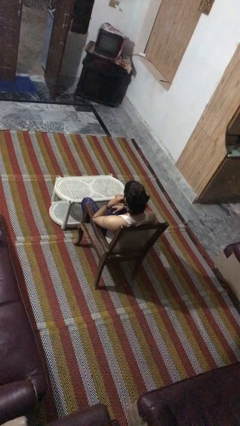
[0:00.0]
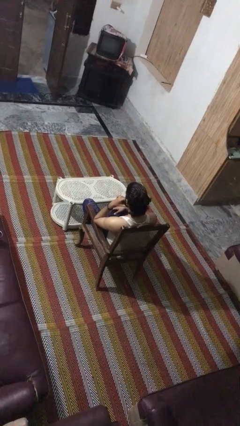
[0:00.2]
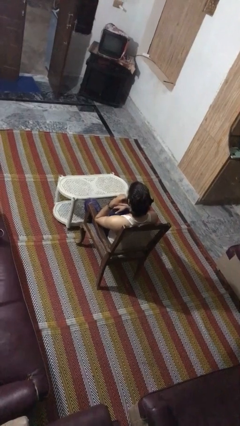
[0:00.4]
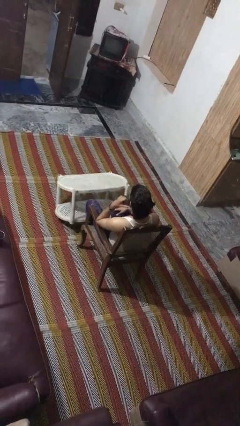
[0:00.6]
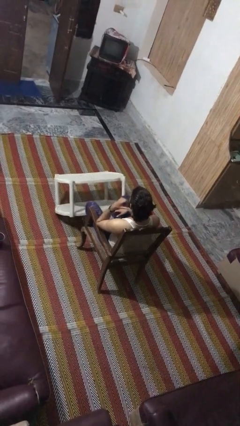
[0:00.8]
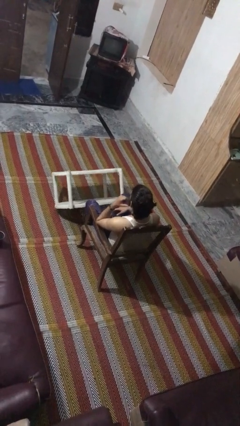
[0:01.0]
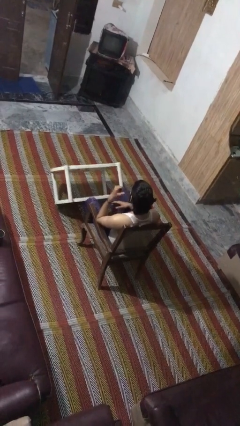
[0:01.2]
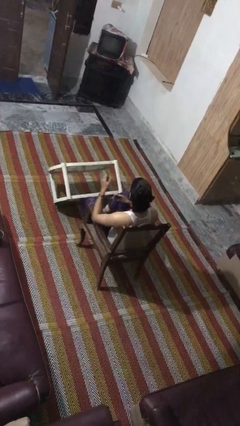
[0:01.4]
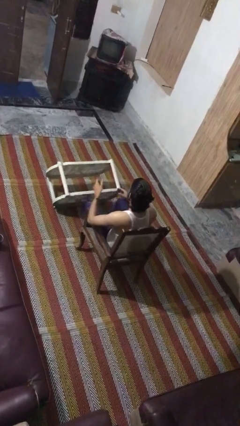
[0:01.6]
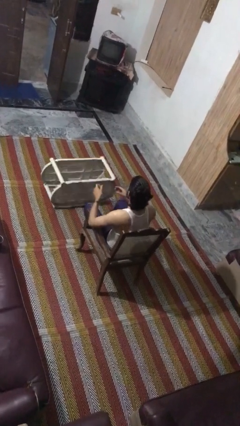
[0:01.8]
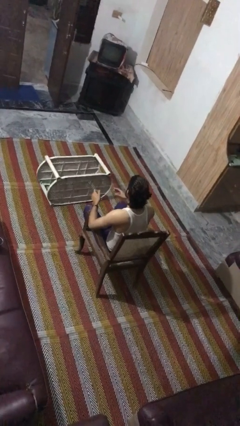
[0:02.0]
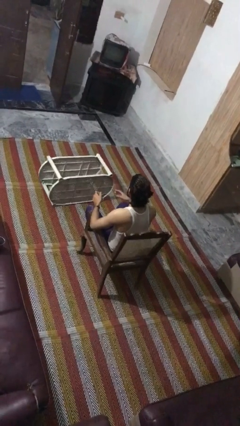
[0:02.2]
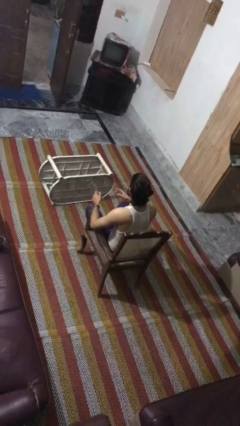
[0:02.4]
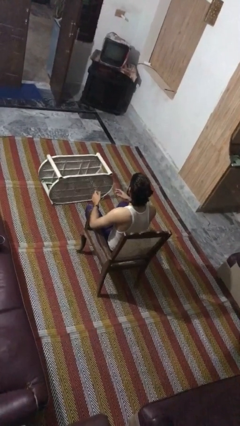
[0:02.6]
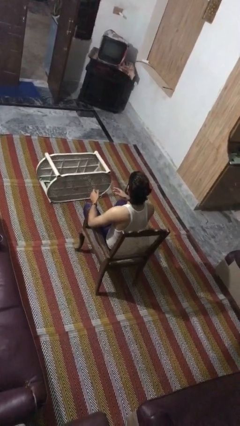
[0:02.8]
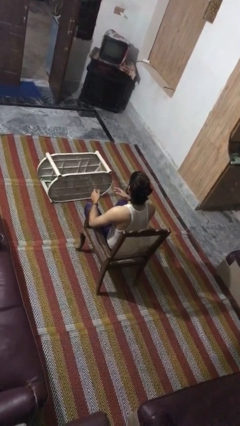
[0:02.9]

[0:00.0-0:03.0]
person knocks over furniture

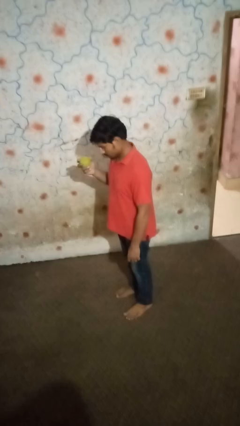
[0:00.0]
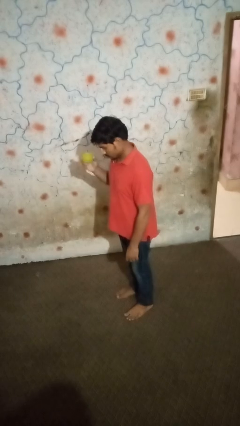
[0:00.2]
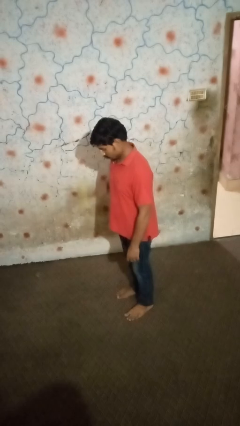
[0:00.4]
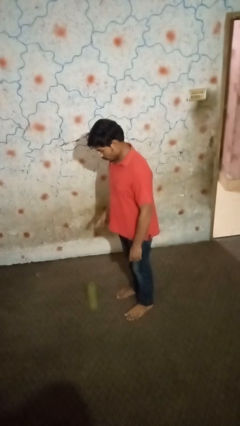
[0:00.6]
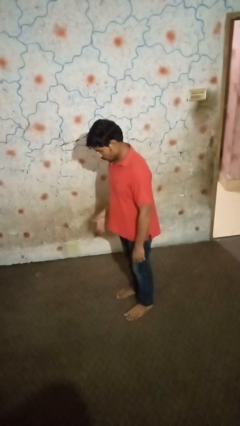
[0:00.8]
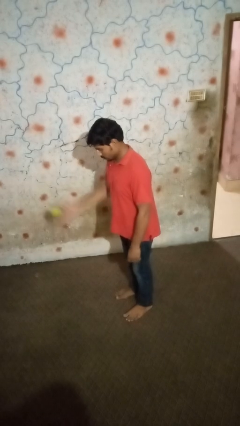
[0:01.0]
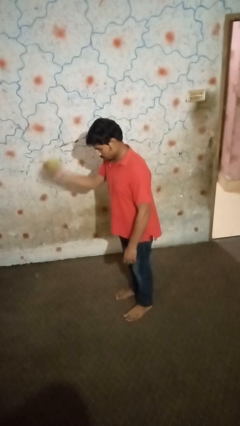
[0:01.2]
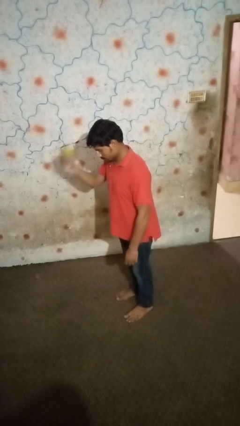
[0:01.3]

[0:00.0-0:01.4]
person bounces ball on floor

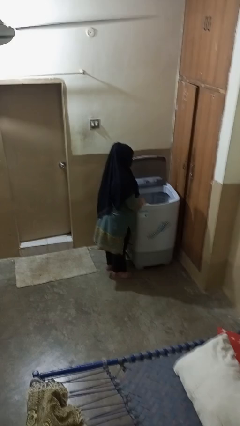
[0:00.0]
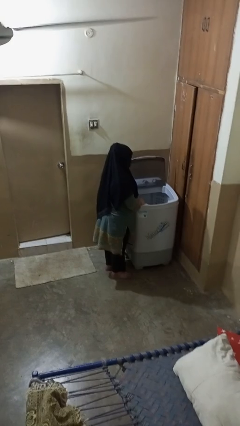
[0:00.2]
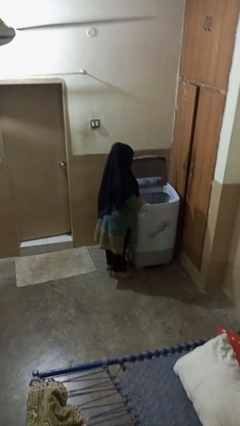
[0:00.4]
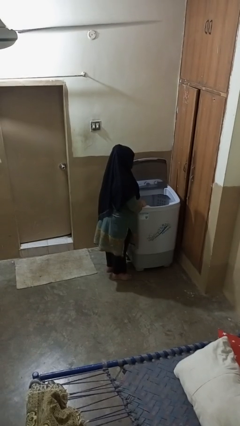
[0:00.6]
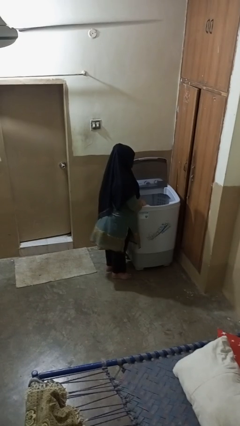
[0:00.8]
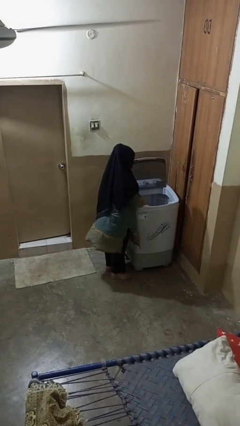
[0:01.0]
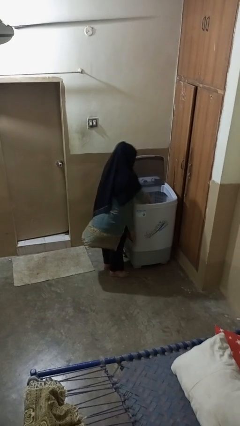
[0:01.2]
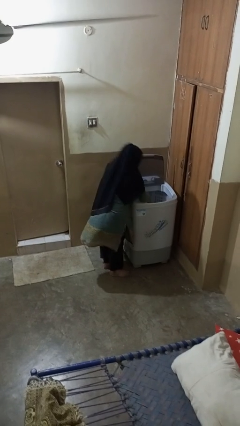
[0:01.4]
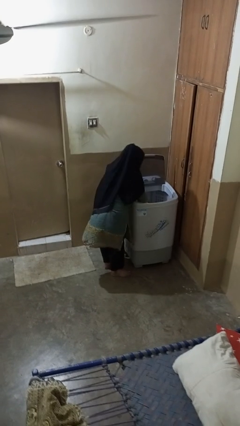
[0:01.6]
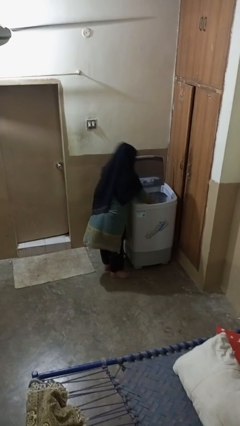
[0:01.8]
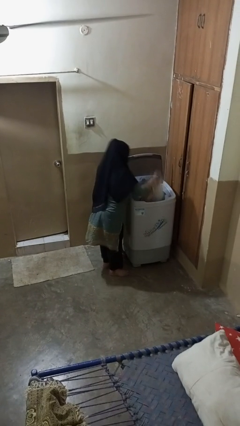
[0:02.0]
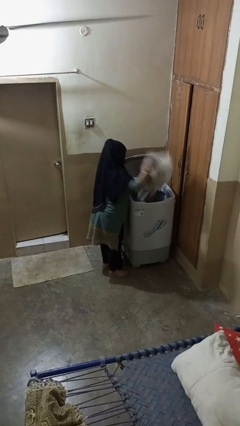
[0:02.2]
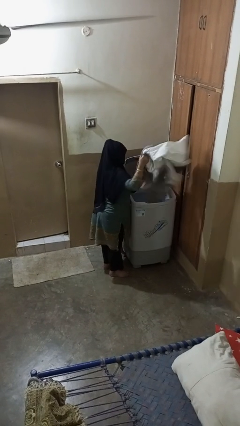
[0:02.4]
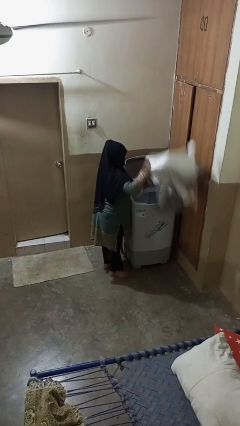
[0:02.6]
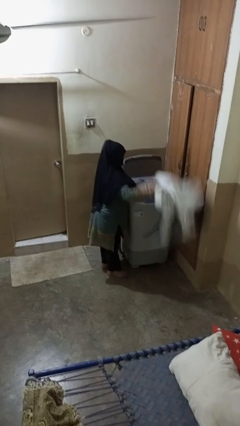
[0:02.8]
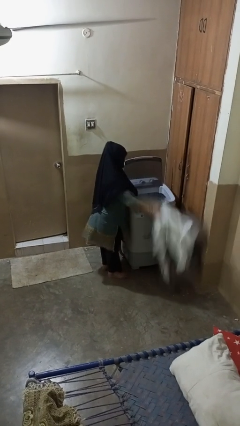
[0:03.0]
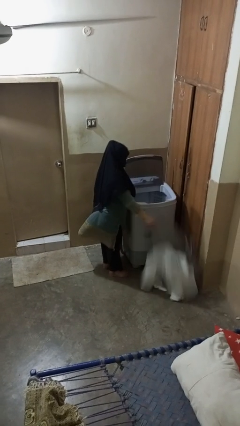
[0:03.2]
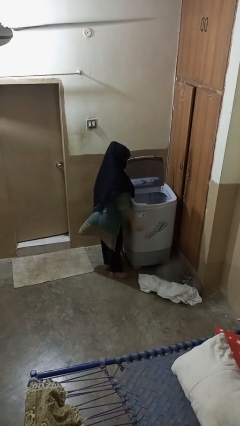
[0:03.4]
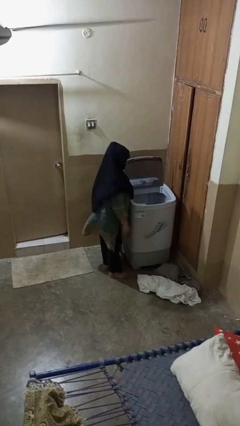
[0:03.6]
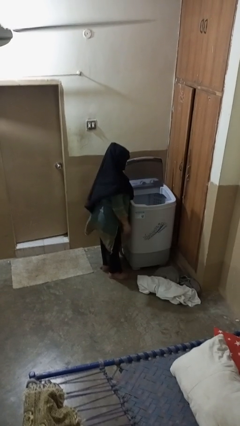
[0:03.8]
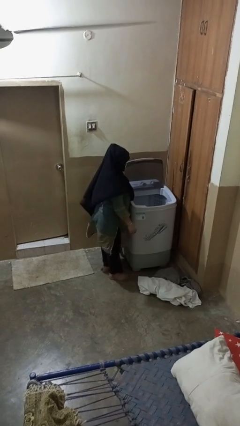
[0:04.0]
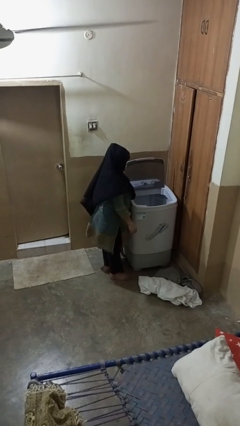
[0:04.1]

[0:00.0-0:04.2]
person unloads clotheswasher

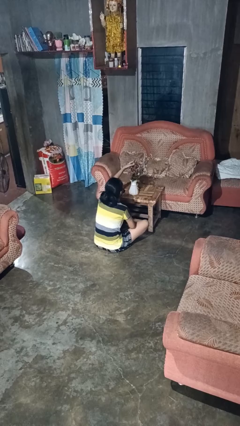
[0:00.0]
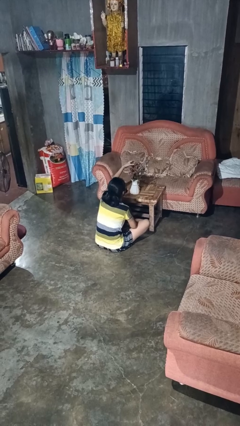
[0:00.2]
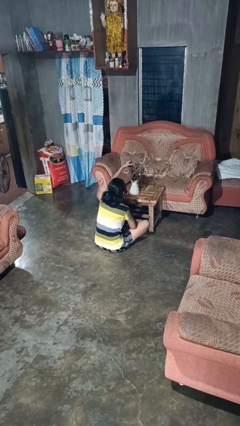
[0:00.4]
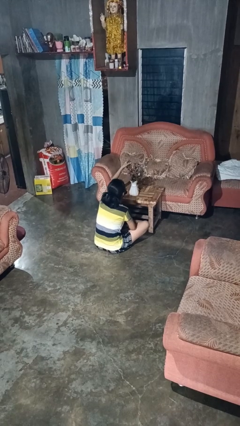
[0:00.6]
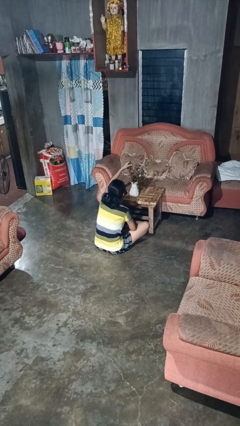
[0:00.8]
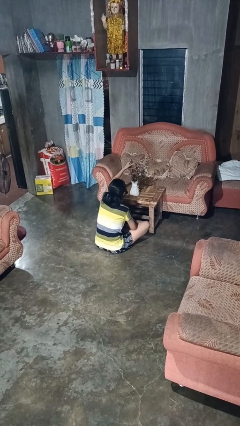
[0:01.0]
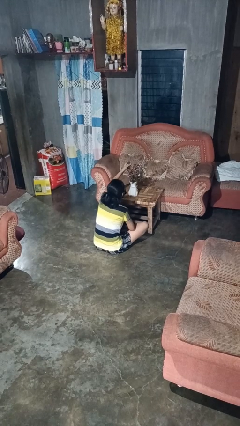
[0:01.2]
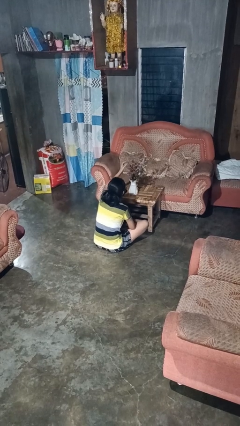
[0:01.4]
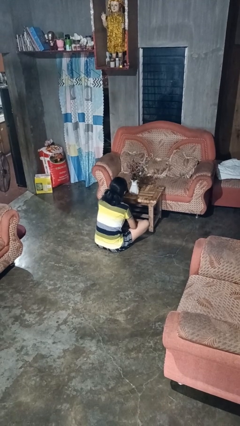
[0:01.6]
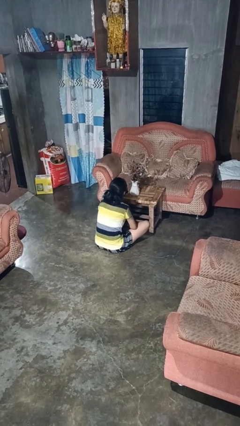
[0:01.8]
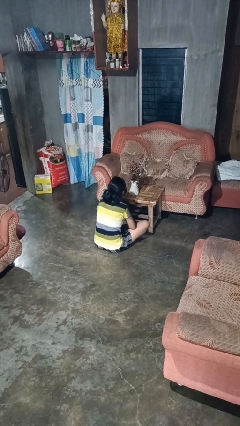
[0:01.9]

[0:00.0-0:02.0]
person arranges flowers in vase

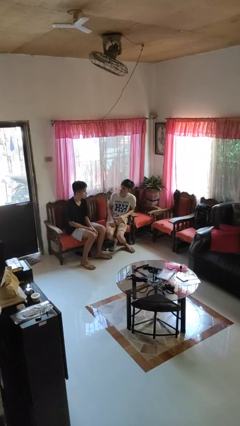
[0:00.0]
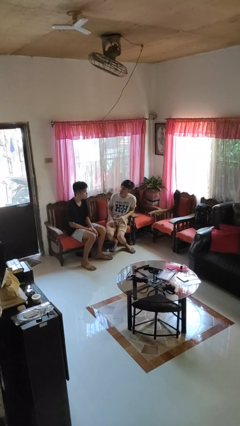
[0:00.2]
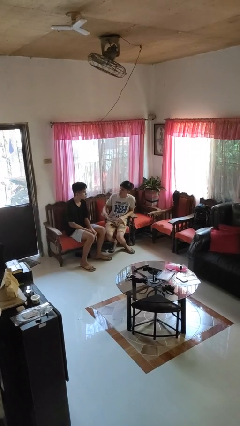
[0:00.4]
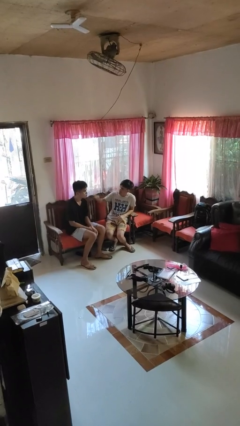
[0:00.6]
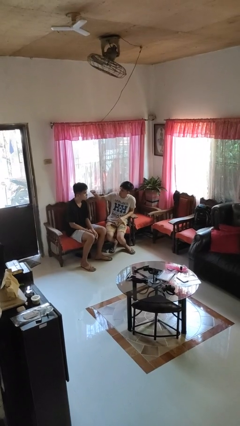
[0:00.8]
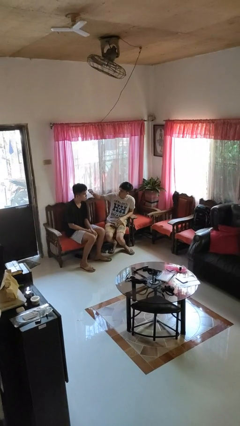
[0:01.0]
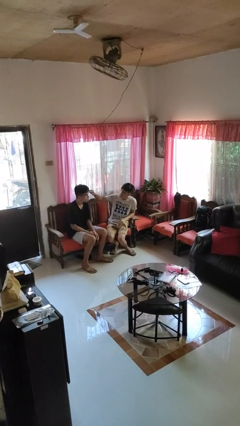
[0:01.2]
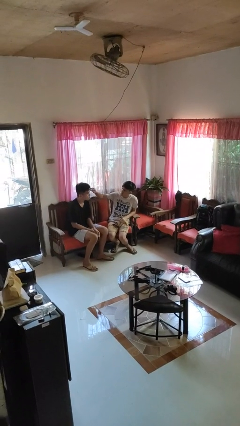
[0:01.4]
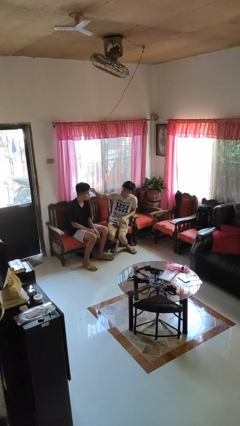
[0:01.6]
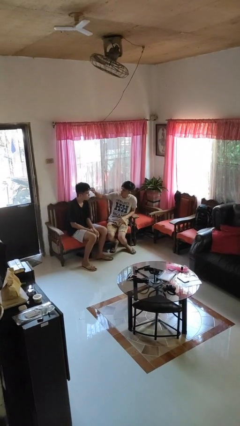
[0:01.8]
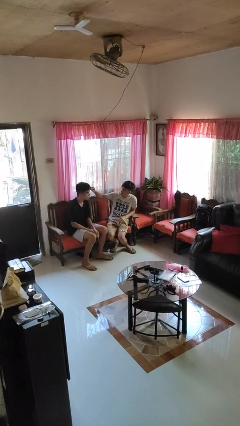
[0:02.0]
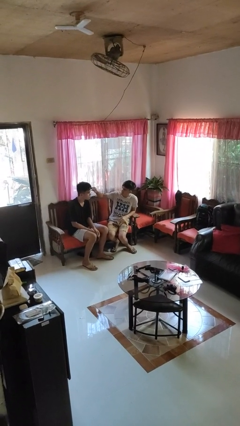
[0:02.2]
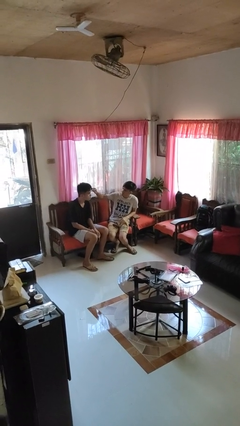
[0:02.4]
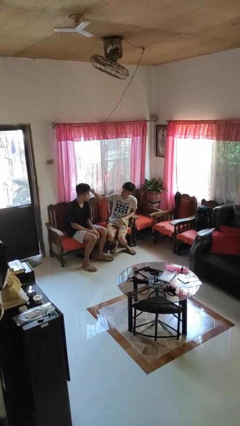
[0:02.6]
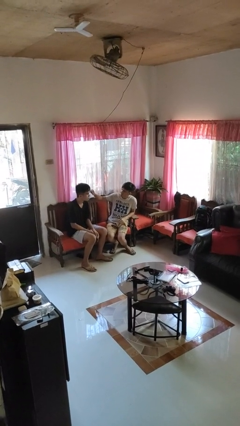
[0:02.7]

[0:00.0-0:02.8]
person touches face of person

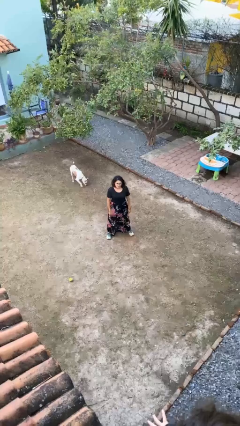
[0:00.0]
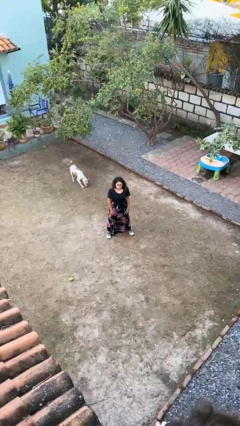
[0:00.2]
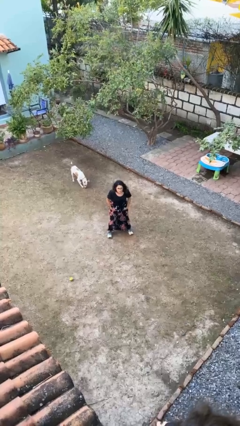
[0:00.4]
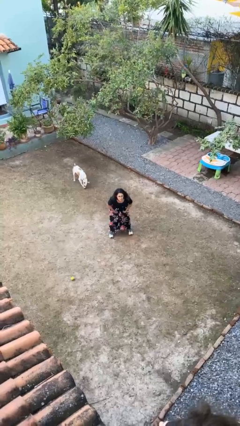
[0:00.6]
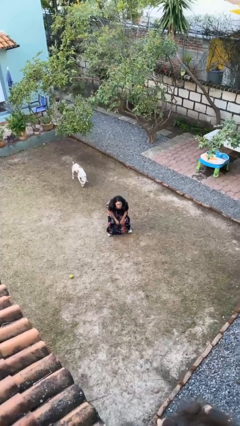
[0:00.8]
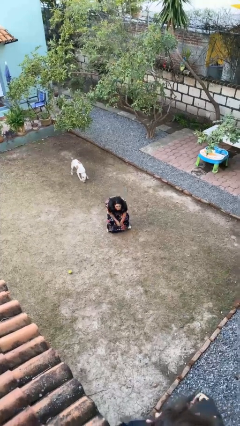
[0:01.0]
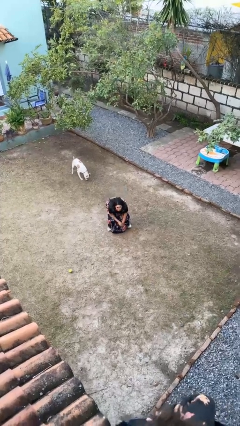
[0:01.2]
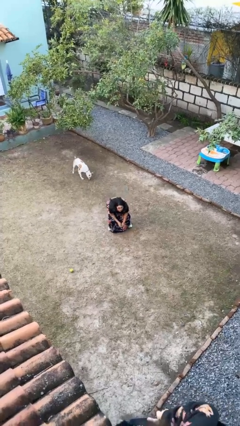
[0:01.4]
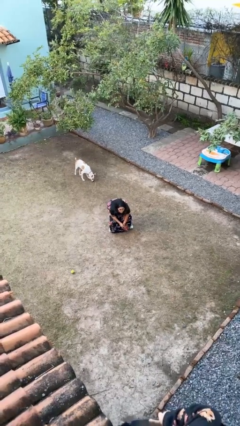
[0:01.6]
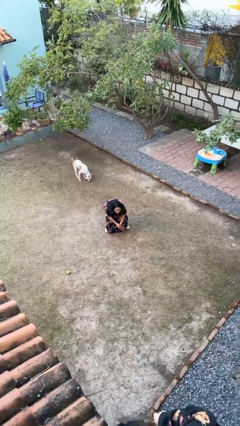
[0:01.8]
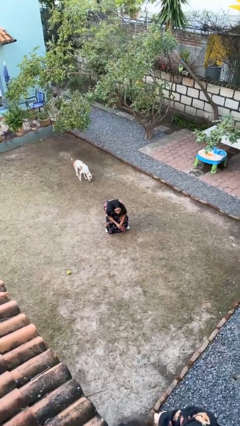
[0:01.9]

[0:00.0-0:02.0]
person squats

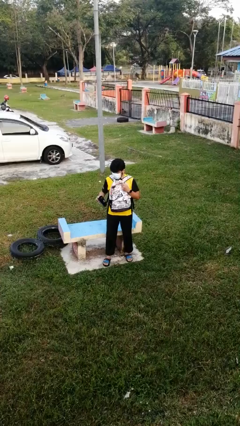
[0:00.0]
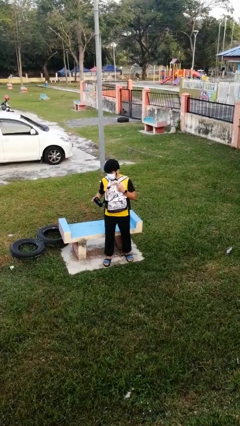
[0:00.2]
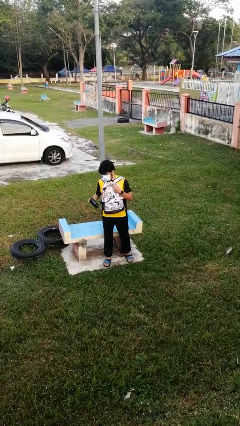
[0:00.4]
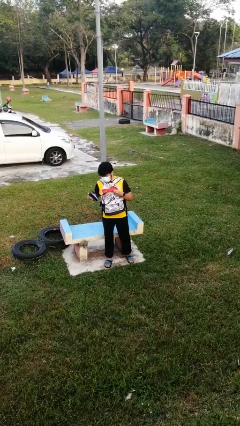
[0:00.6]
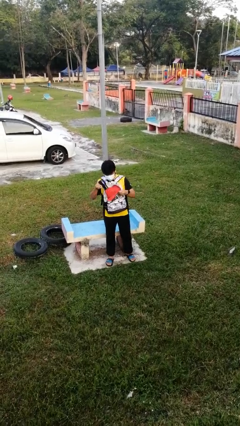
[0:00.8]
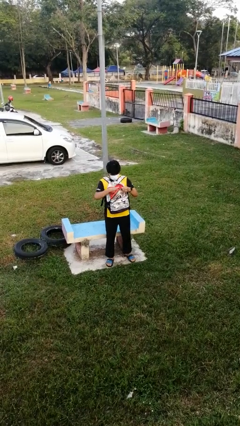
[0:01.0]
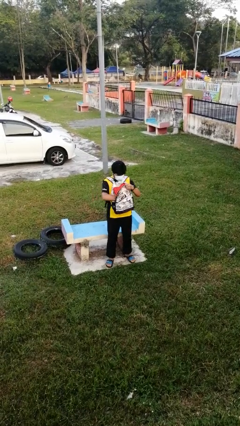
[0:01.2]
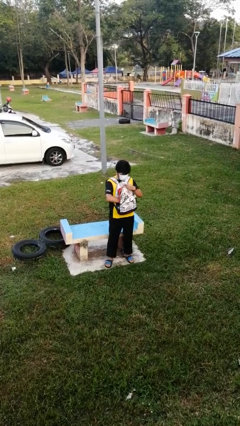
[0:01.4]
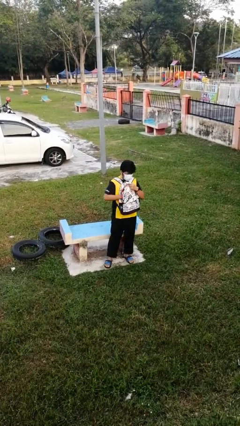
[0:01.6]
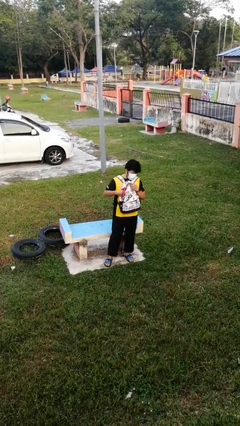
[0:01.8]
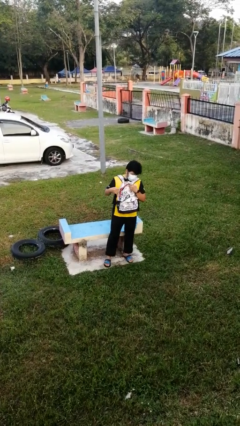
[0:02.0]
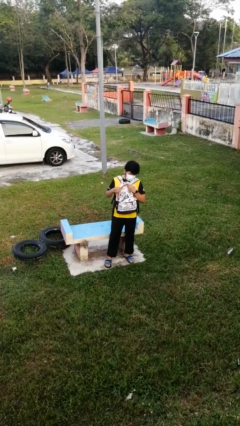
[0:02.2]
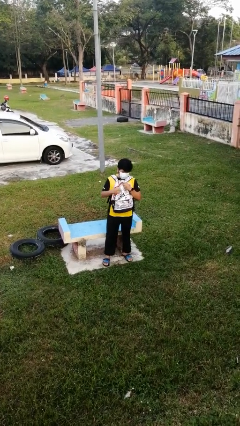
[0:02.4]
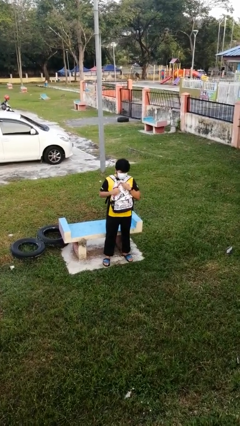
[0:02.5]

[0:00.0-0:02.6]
person puts object into backpack
